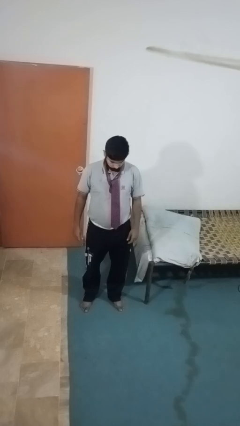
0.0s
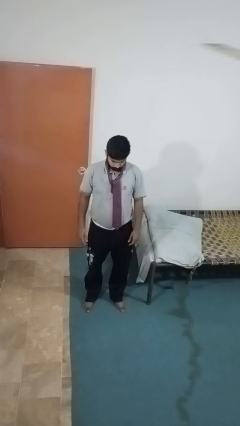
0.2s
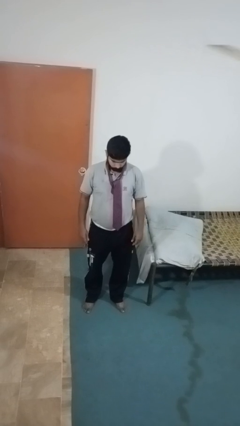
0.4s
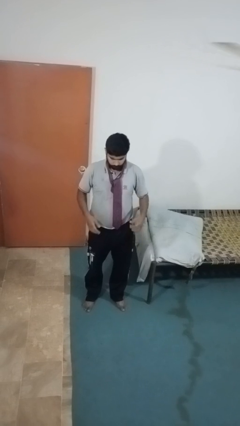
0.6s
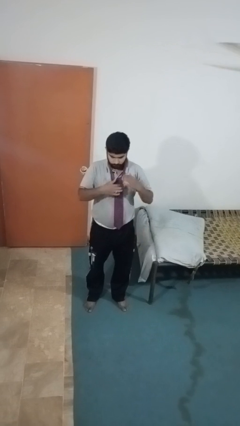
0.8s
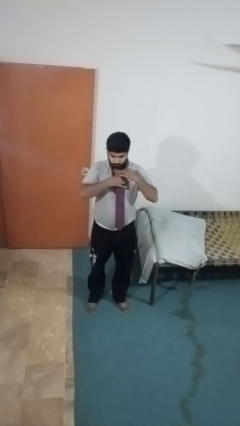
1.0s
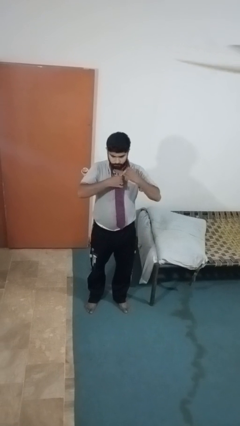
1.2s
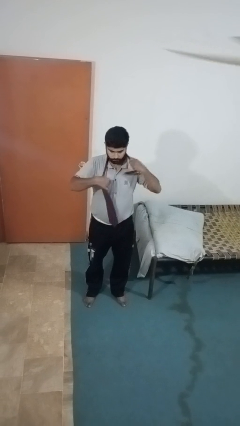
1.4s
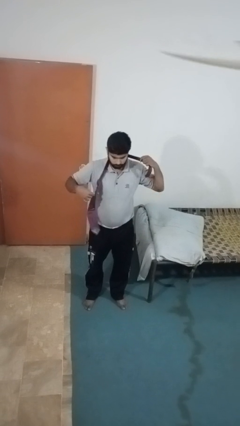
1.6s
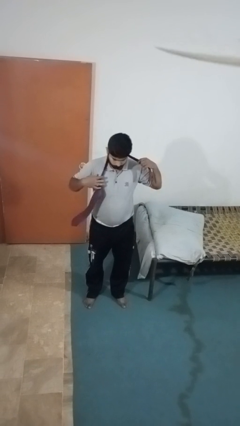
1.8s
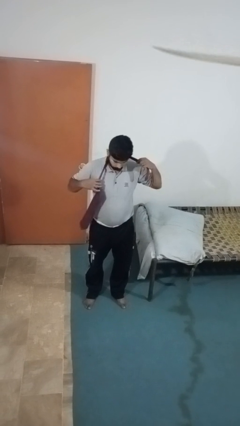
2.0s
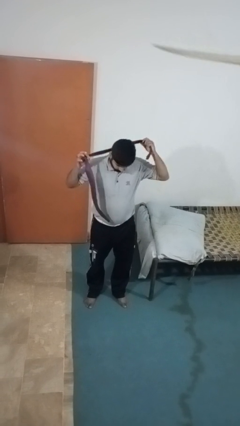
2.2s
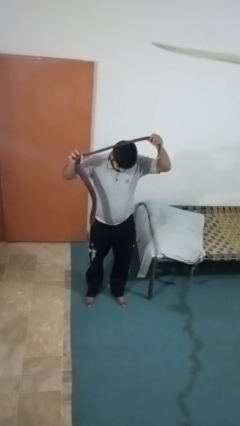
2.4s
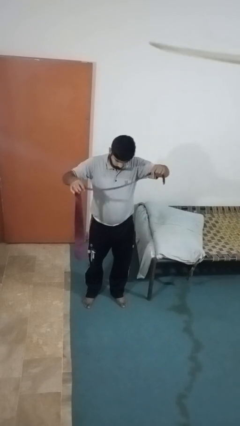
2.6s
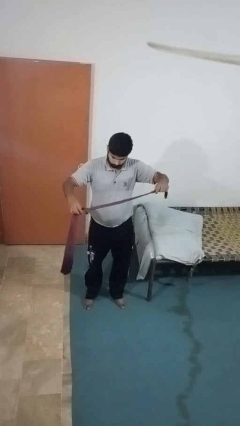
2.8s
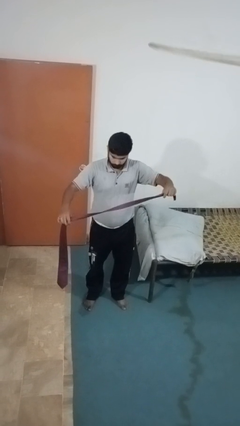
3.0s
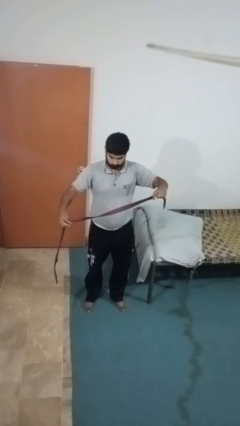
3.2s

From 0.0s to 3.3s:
person takes off necktie

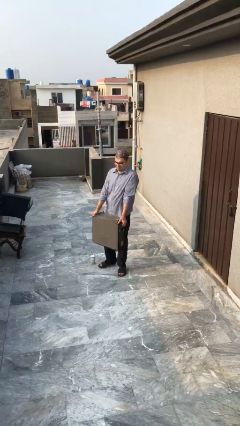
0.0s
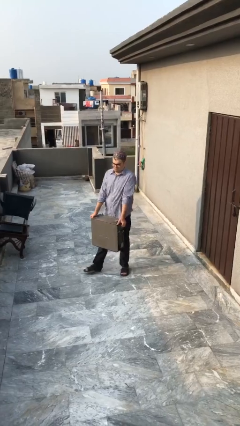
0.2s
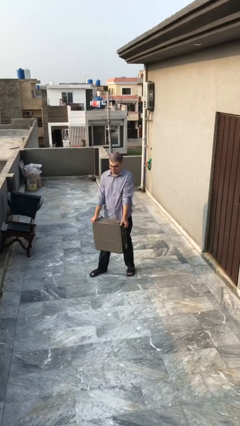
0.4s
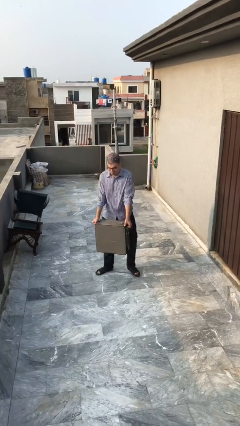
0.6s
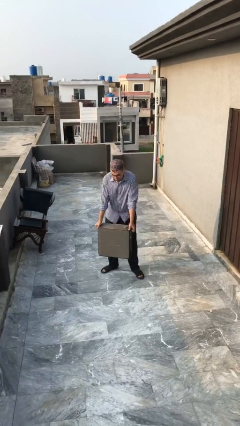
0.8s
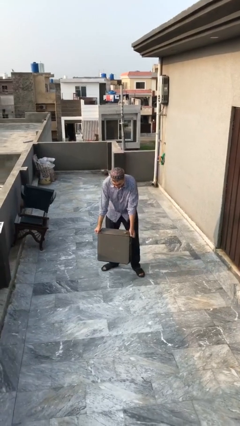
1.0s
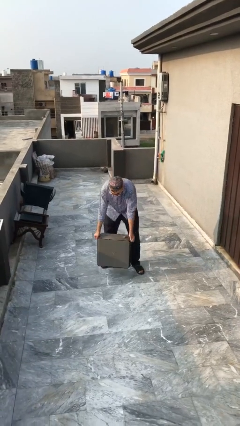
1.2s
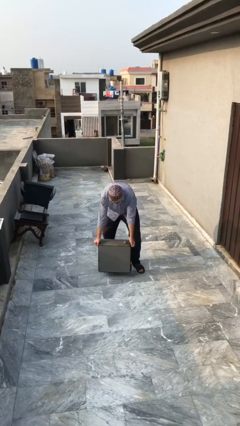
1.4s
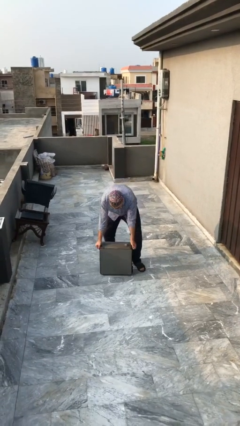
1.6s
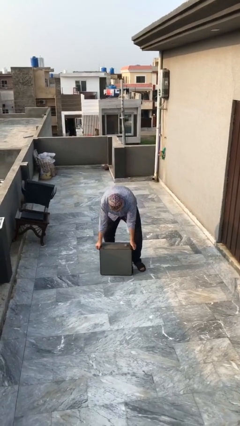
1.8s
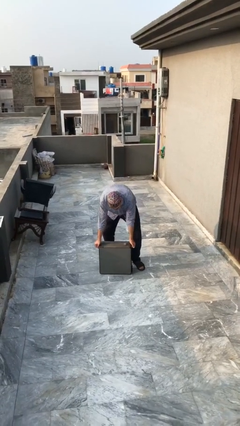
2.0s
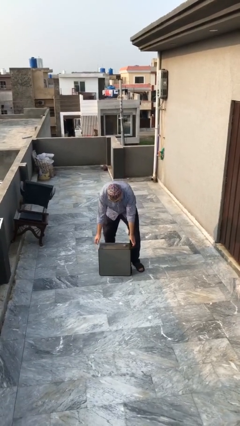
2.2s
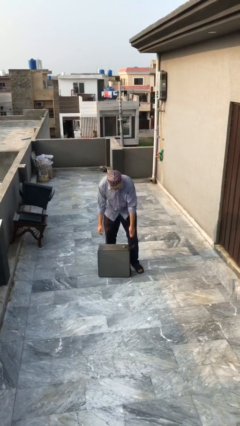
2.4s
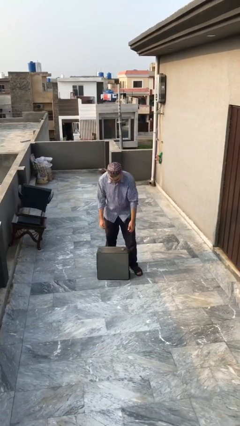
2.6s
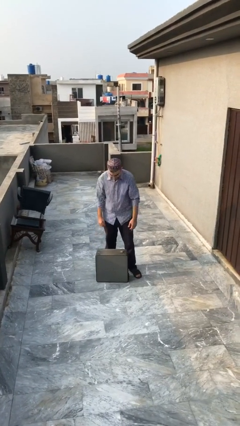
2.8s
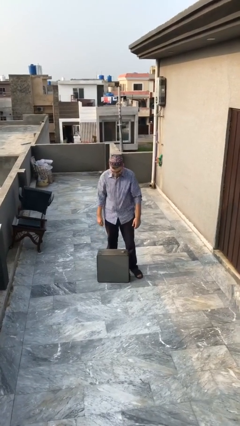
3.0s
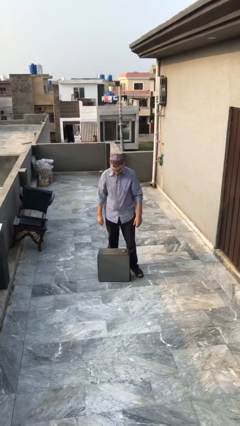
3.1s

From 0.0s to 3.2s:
person puts down object on floor

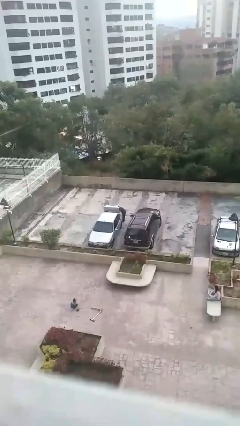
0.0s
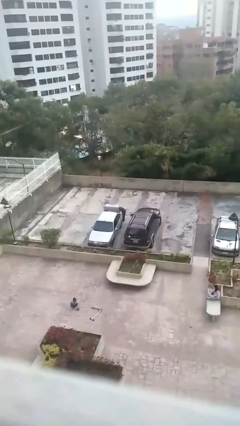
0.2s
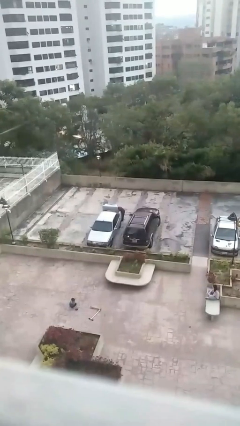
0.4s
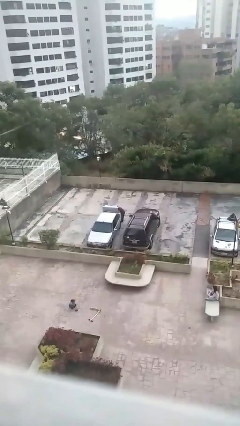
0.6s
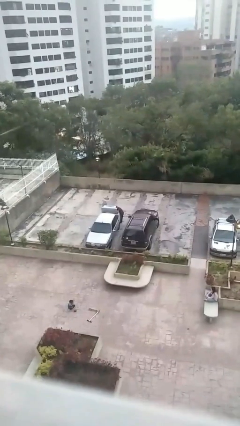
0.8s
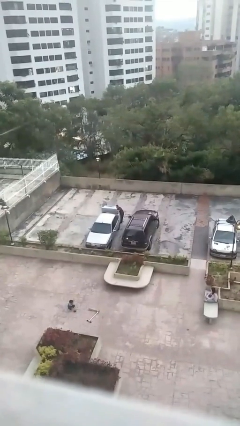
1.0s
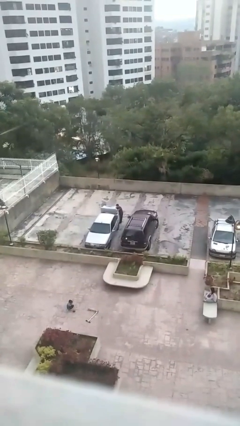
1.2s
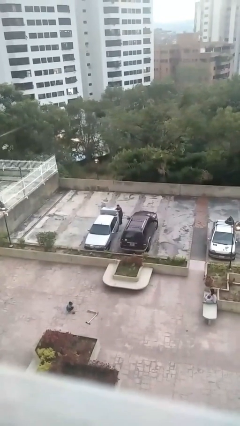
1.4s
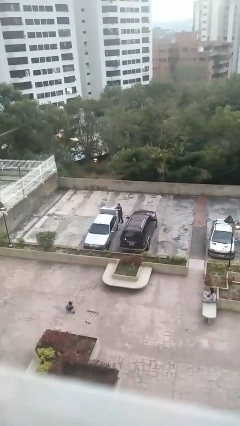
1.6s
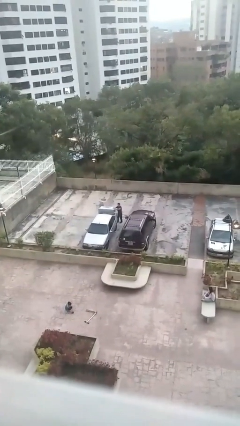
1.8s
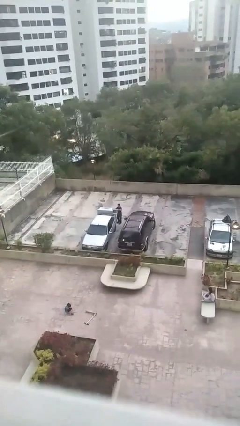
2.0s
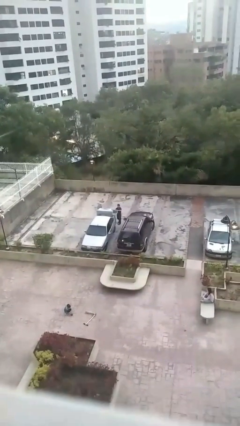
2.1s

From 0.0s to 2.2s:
person unloads car

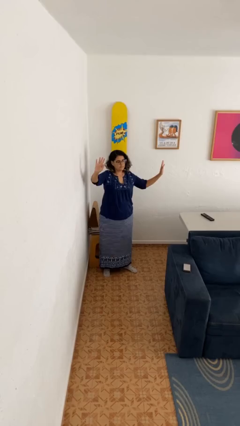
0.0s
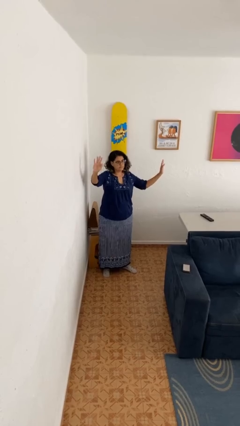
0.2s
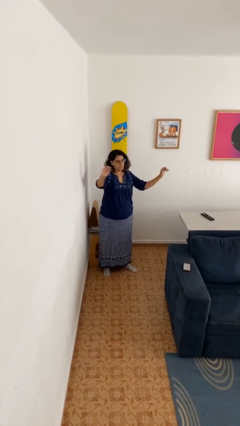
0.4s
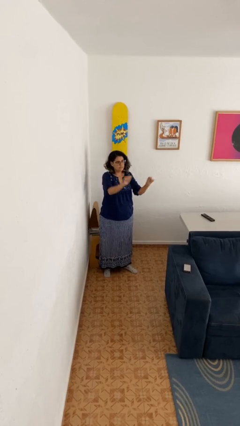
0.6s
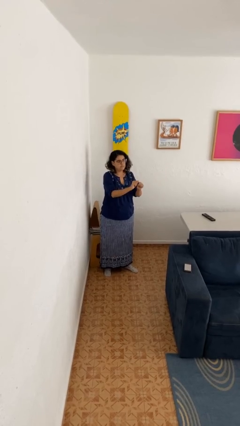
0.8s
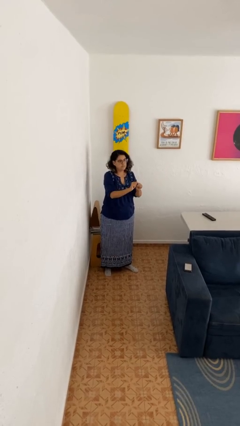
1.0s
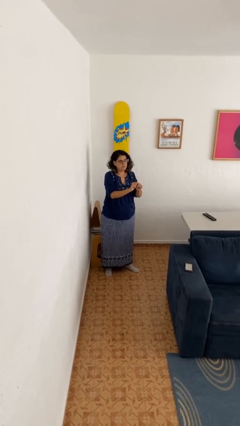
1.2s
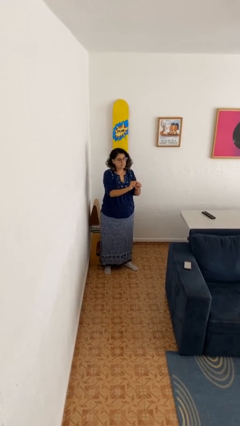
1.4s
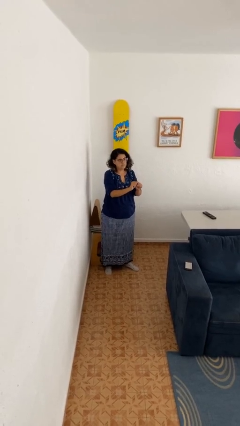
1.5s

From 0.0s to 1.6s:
person gestures zoom out

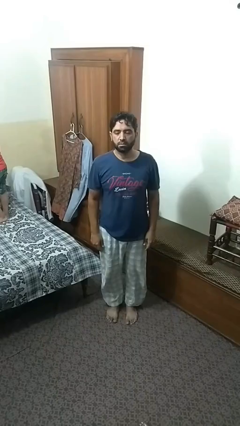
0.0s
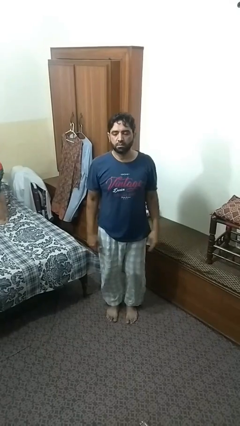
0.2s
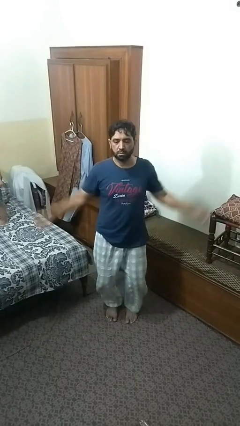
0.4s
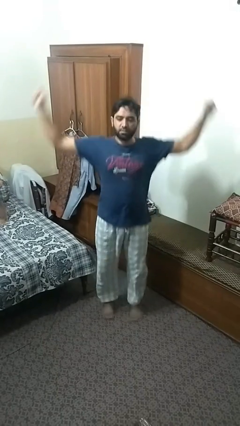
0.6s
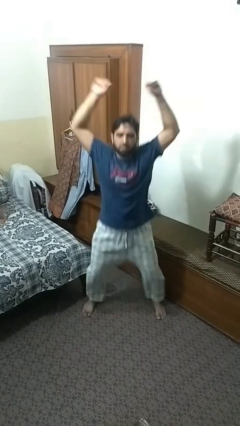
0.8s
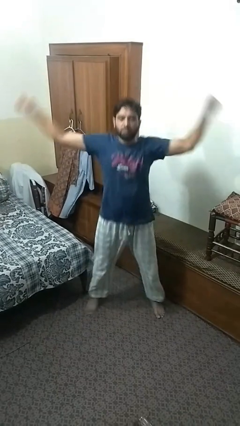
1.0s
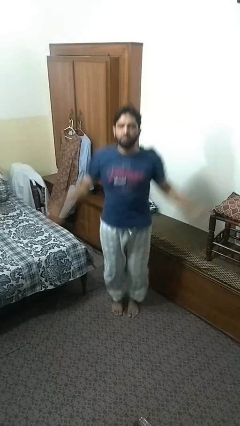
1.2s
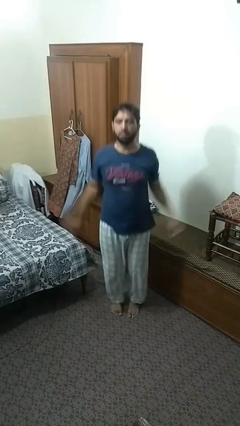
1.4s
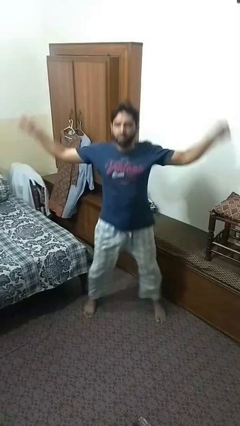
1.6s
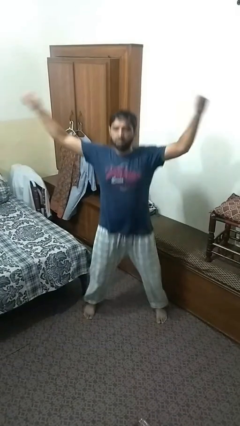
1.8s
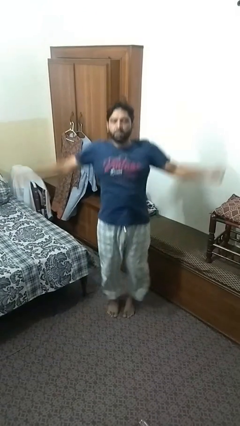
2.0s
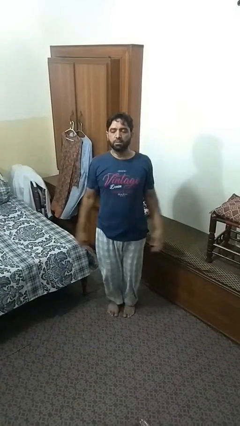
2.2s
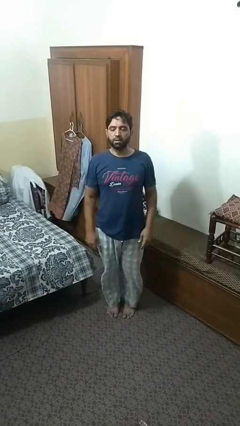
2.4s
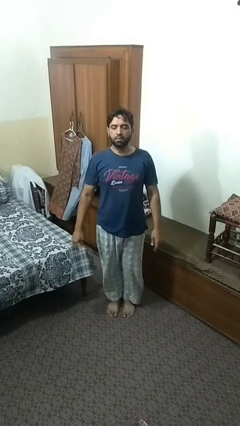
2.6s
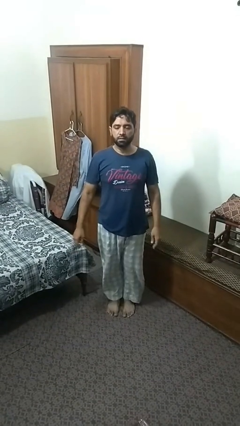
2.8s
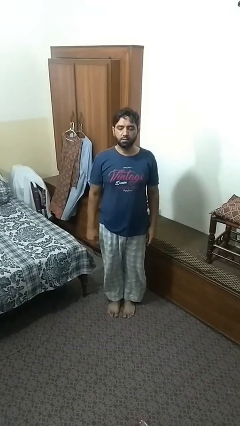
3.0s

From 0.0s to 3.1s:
person exercises with jumping jacks

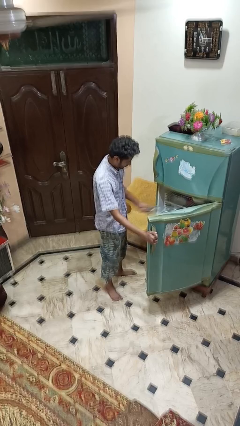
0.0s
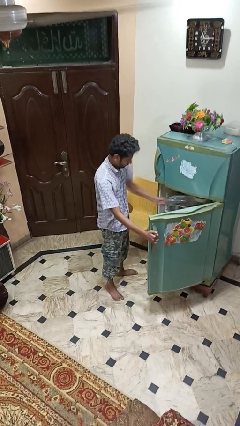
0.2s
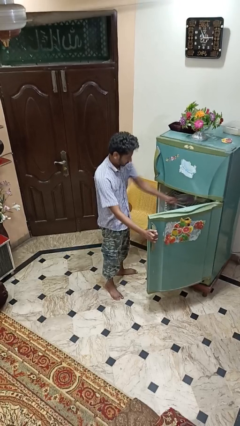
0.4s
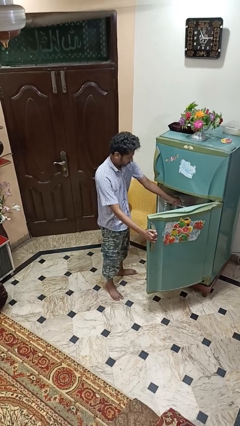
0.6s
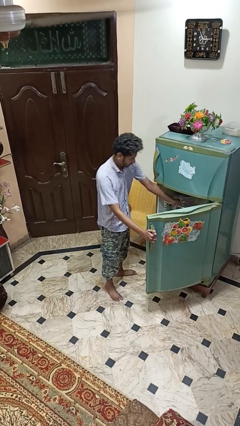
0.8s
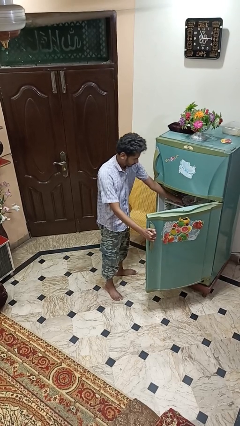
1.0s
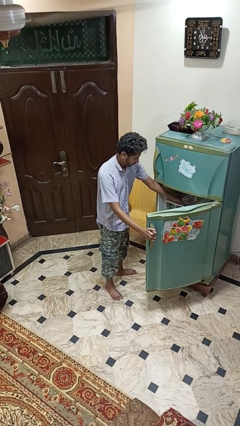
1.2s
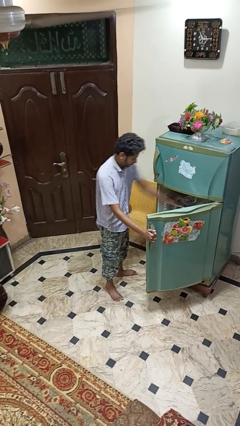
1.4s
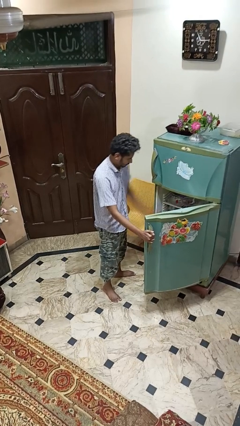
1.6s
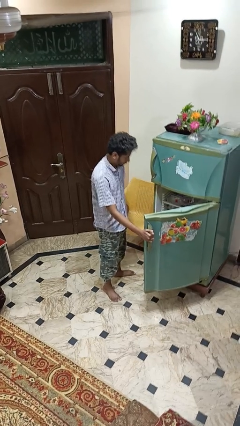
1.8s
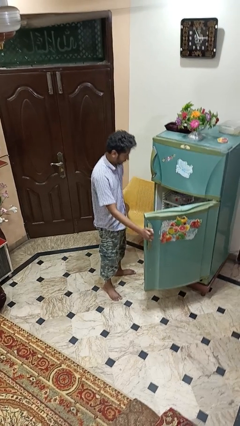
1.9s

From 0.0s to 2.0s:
person puts object into refrigerator

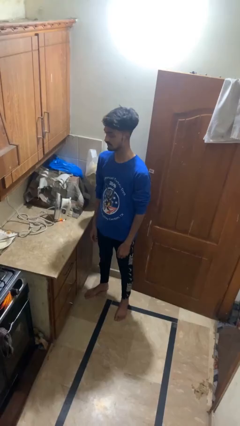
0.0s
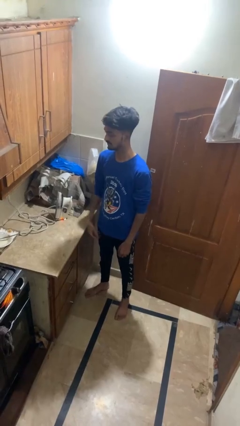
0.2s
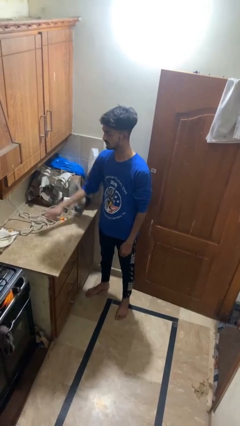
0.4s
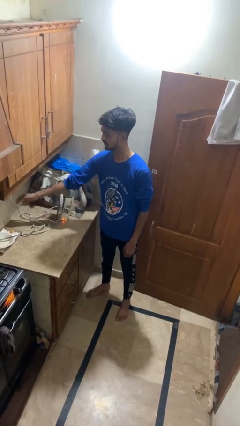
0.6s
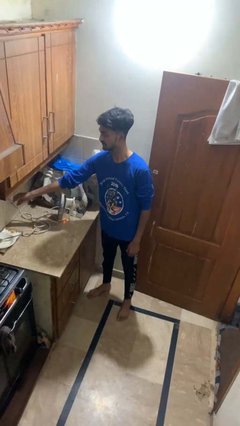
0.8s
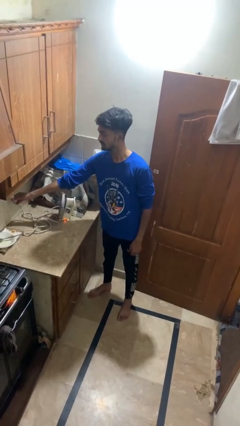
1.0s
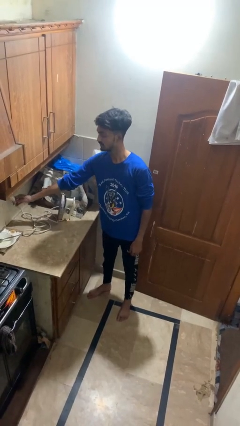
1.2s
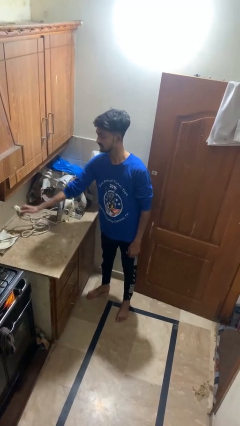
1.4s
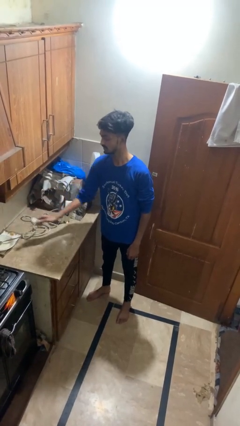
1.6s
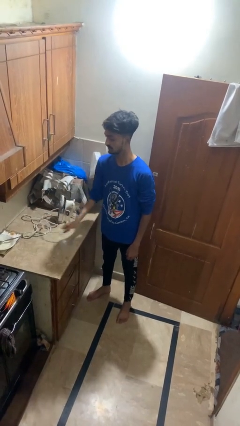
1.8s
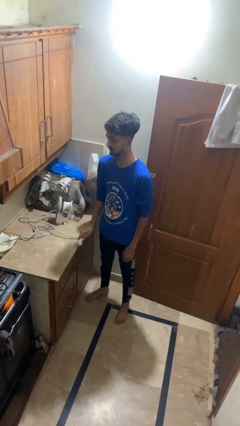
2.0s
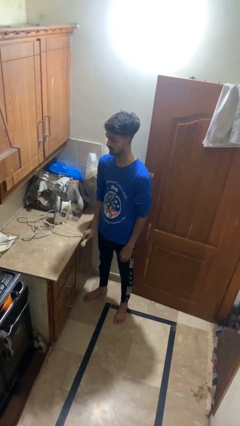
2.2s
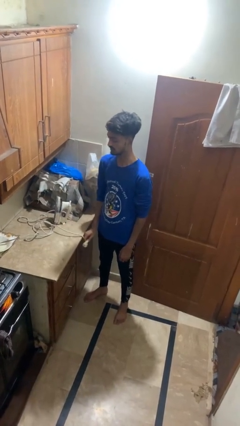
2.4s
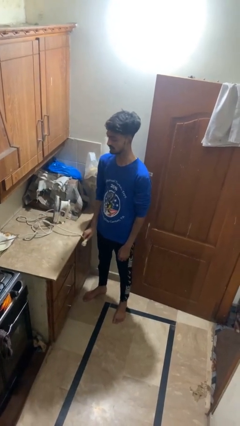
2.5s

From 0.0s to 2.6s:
person unplugs from electrical socket
